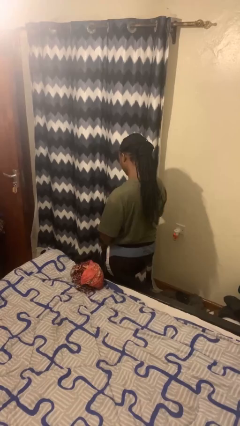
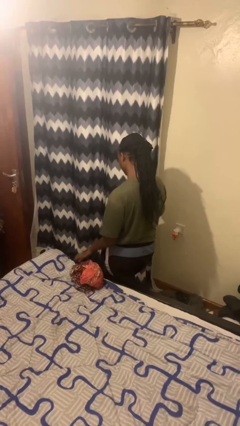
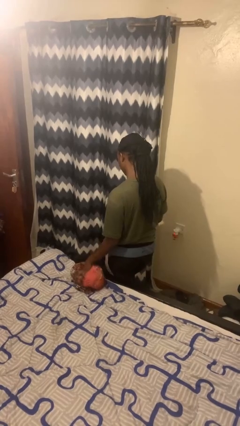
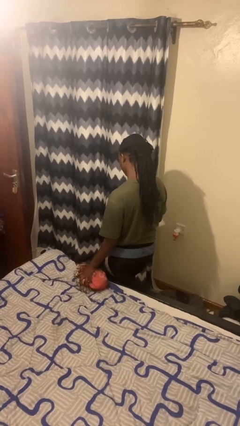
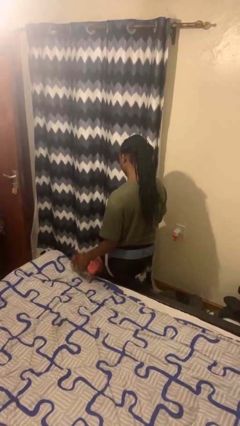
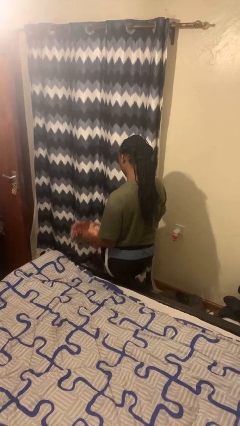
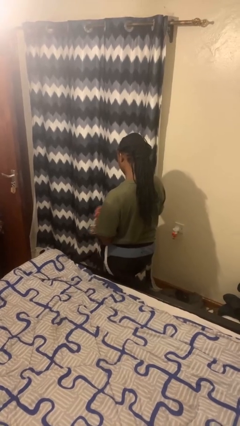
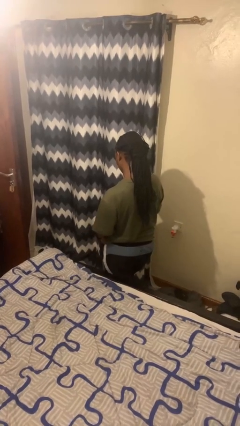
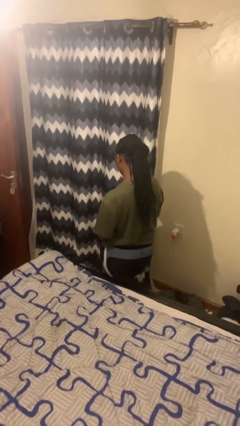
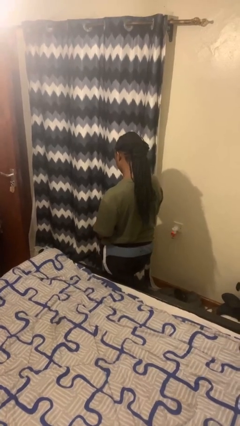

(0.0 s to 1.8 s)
person picks up object from bed

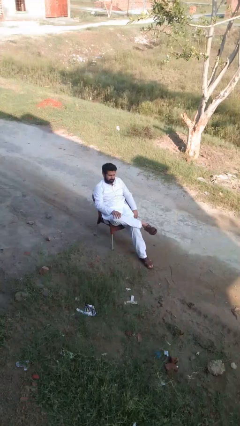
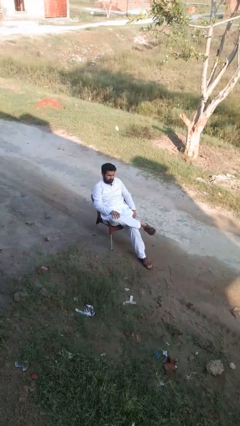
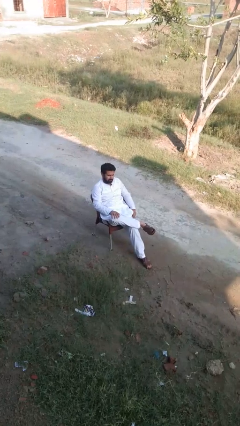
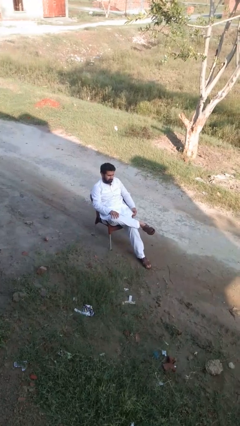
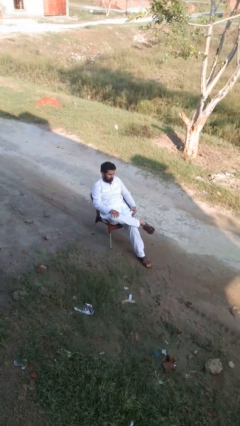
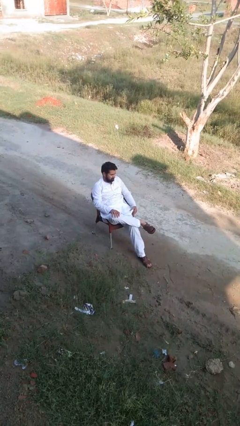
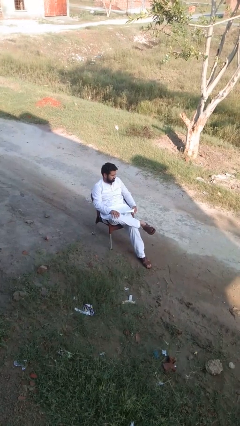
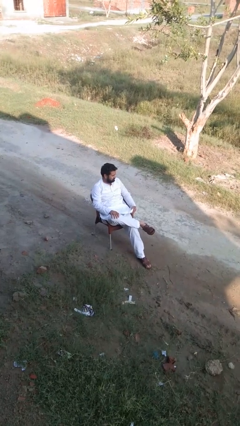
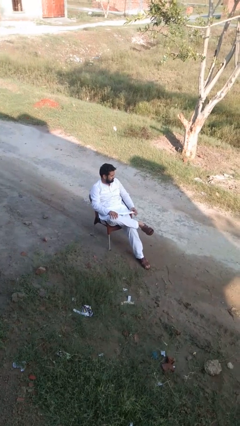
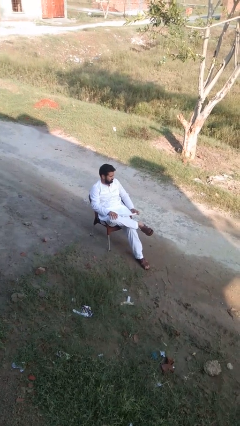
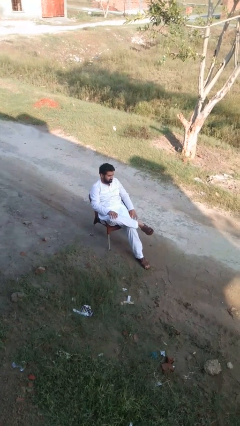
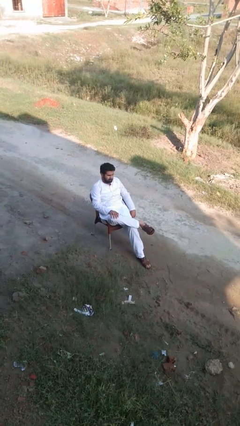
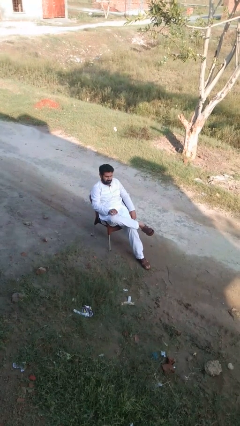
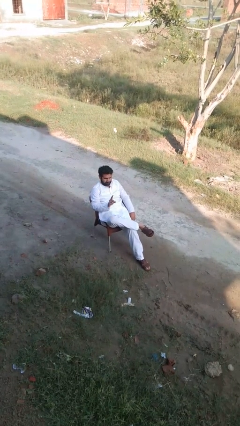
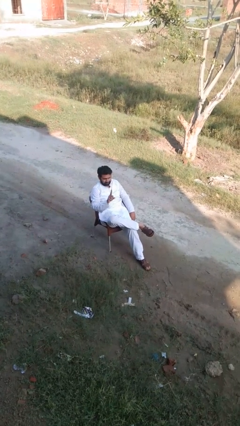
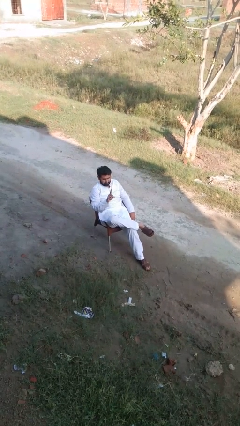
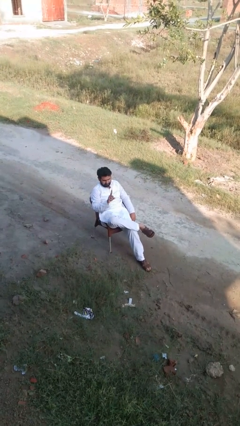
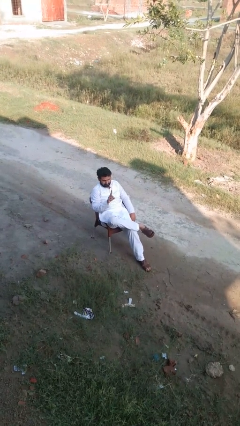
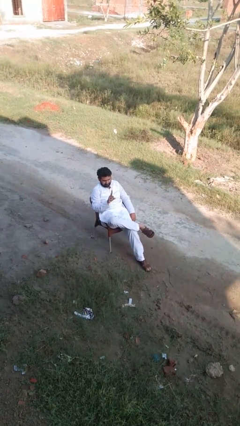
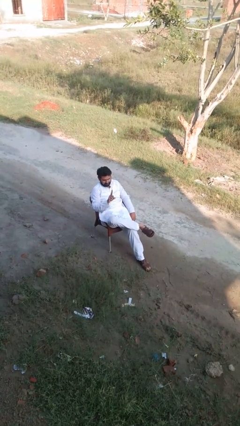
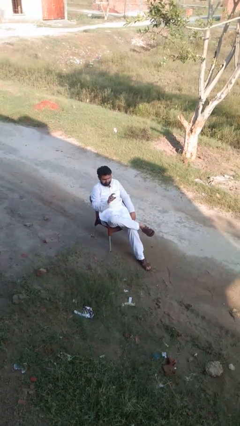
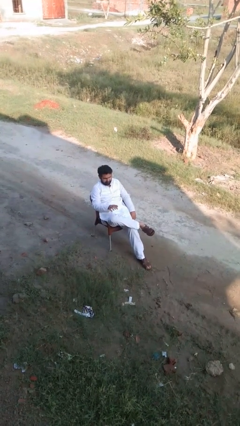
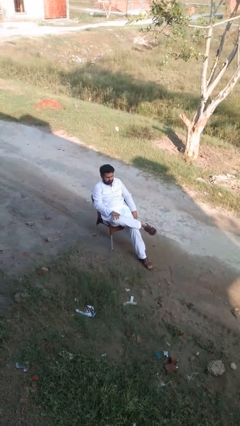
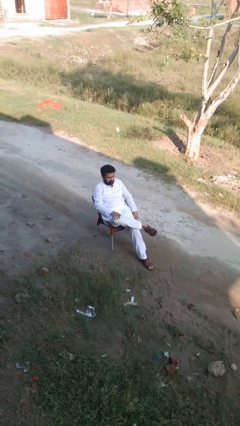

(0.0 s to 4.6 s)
person gestures number one

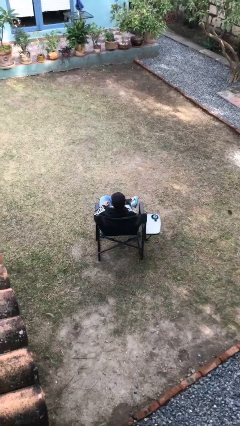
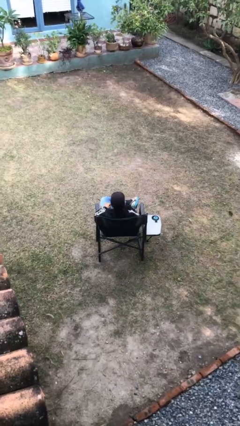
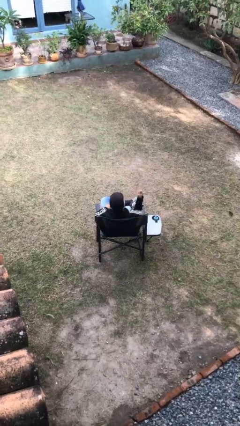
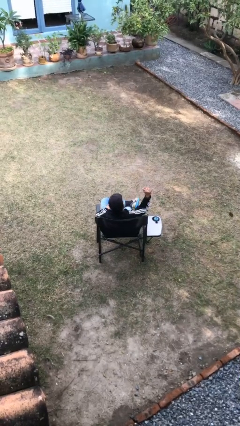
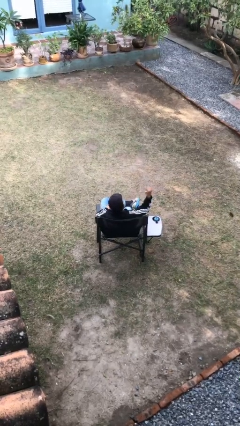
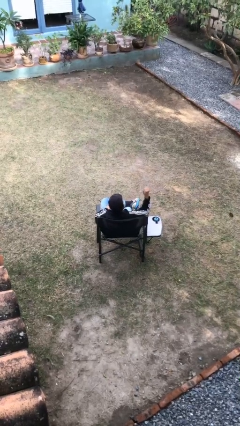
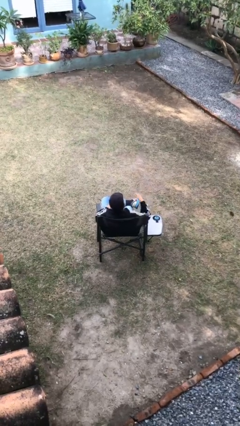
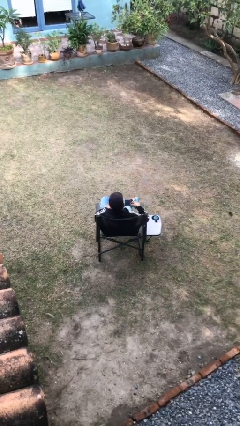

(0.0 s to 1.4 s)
person gestures hang loose

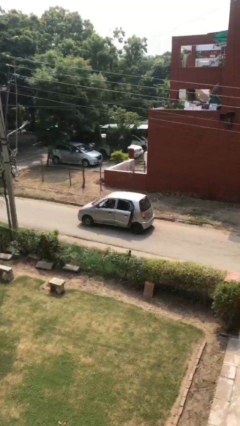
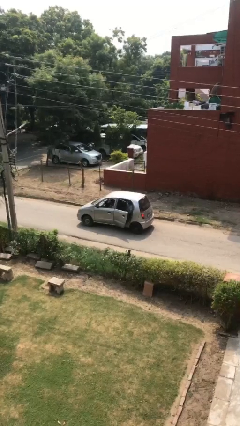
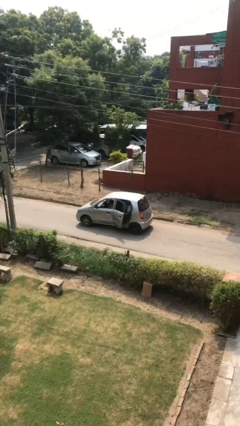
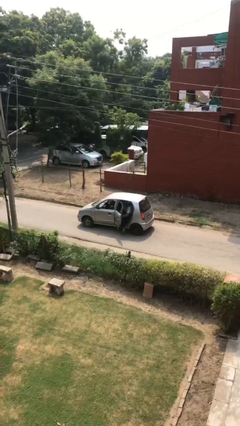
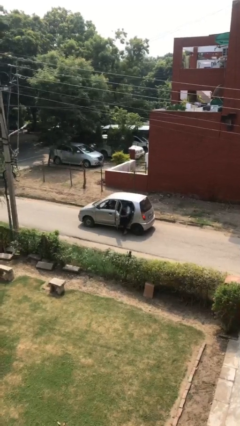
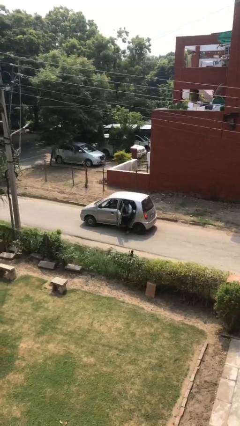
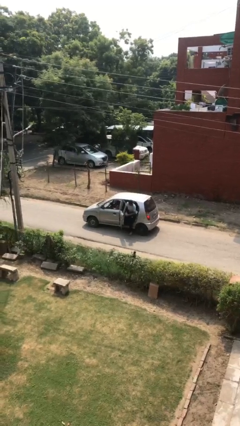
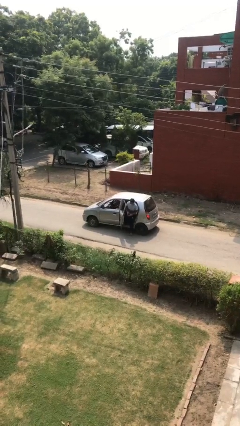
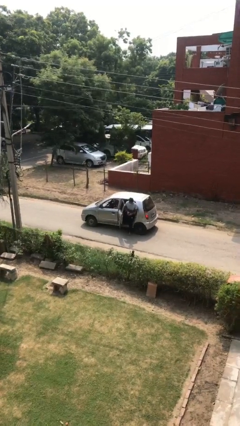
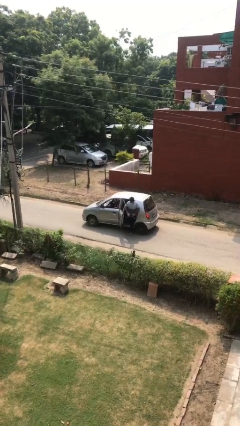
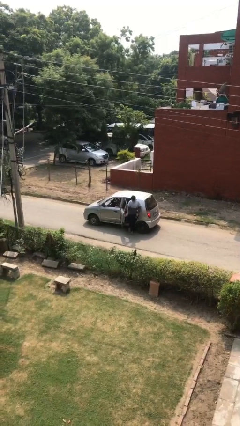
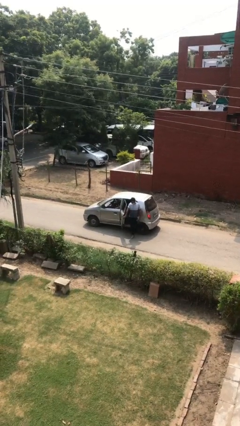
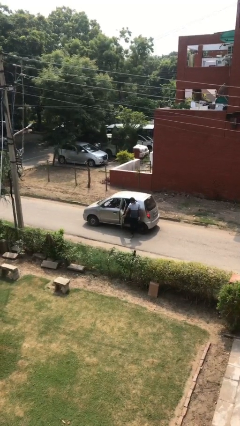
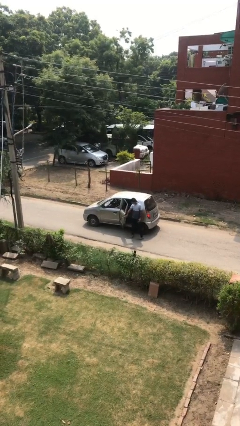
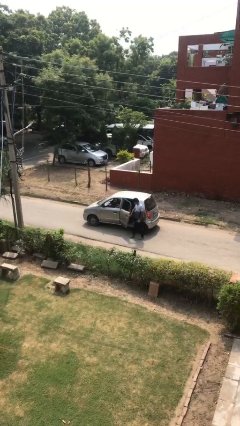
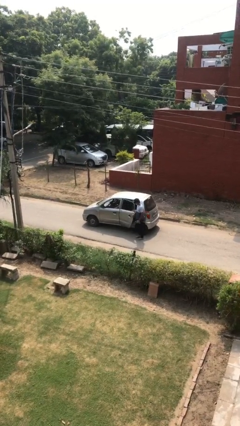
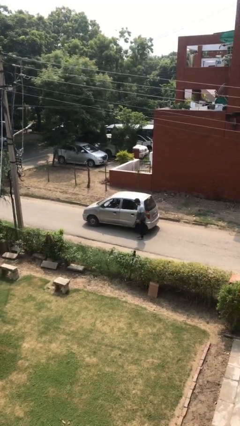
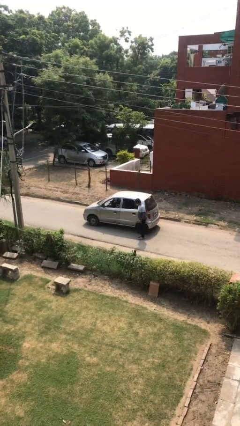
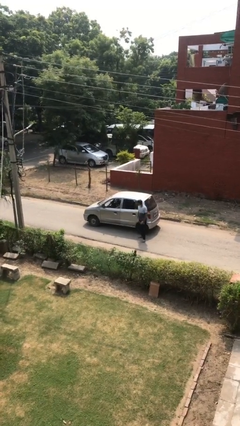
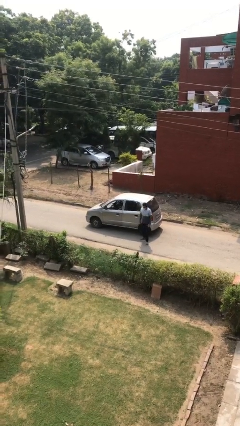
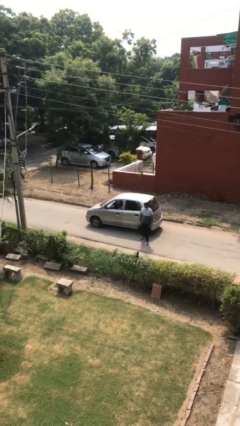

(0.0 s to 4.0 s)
car drops off person

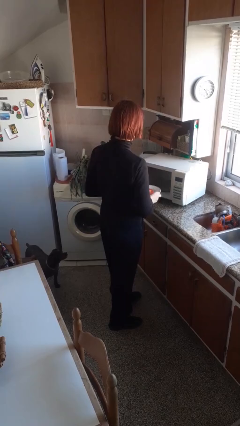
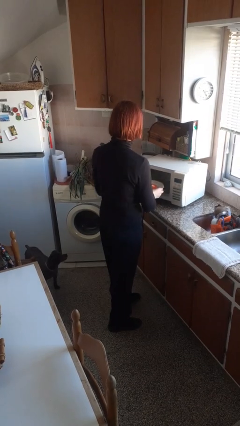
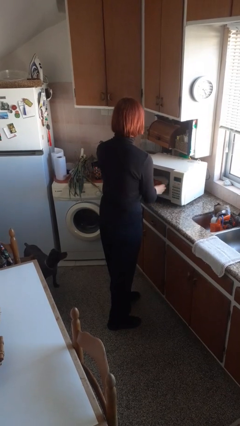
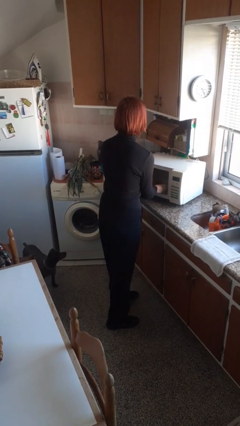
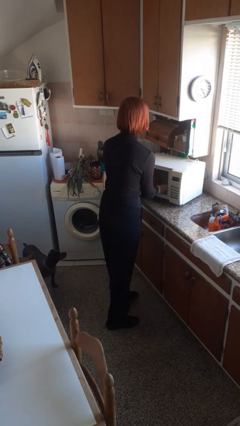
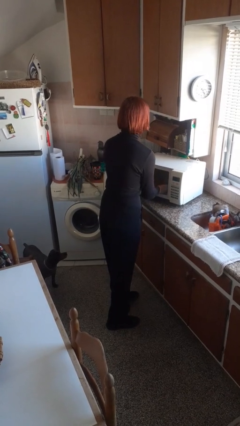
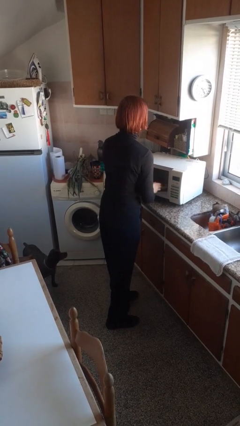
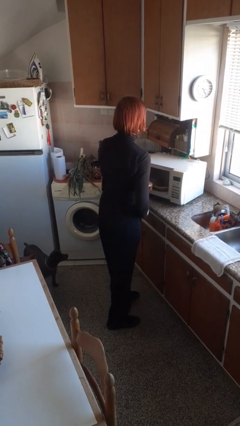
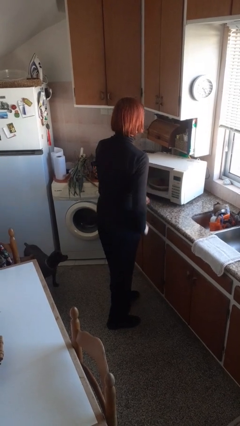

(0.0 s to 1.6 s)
person puts object into microwave

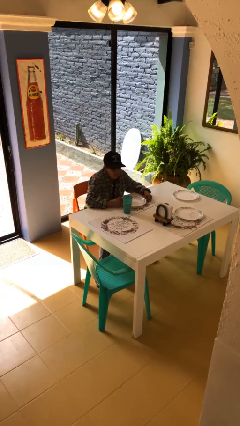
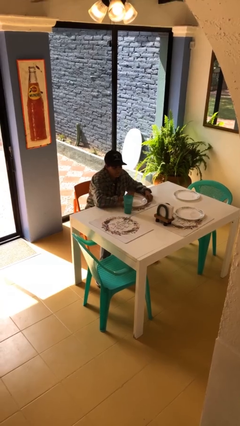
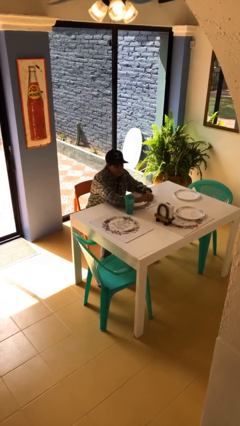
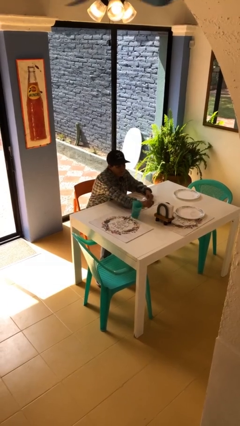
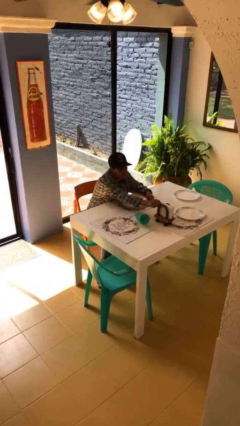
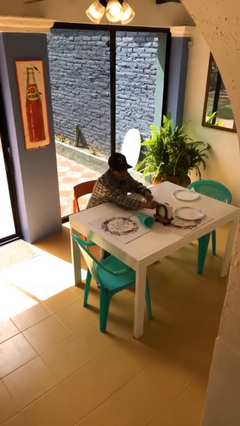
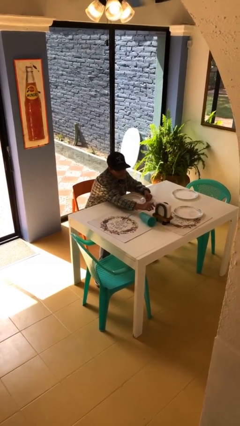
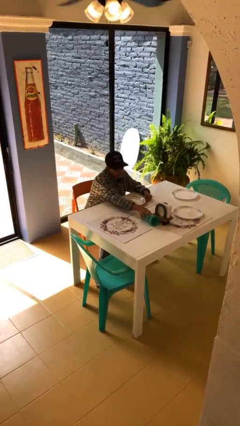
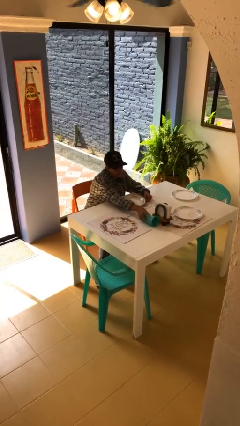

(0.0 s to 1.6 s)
person knocks over glass

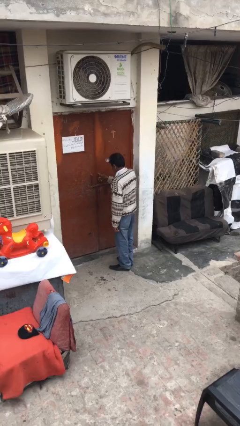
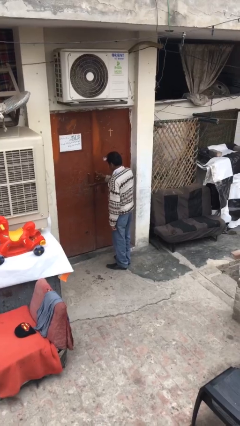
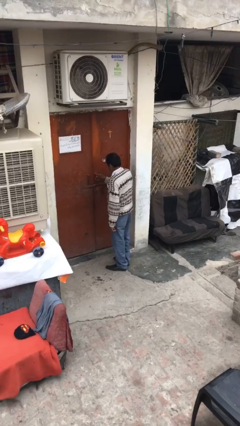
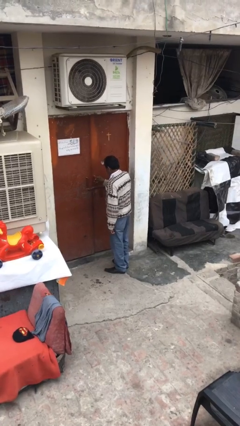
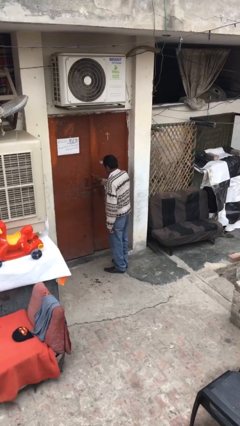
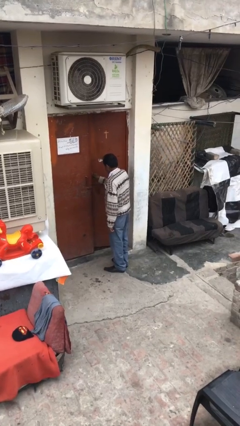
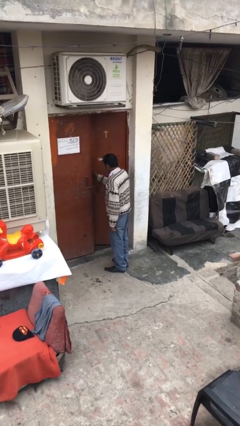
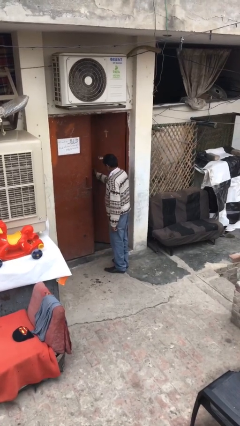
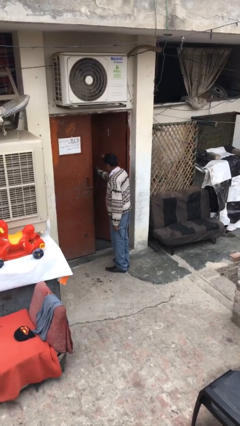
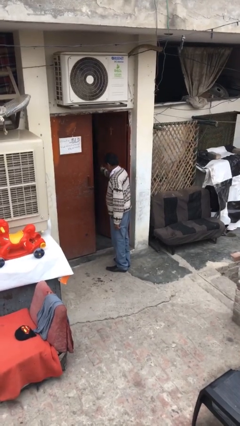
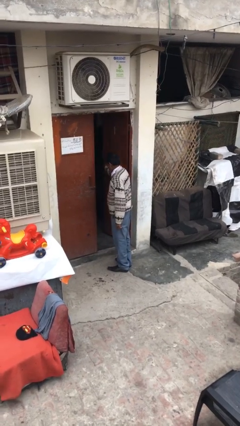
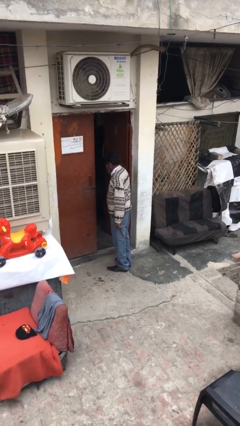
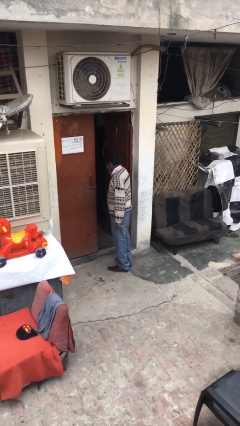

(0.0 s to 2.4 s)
person opens facility door
